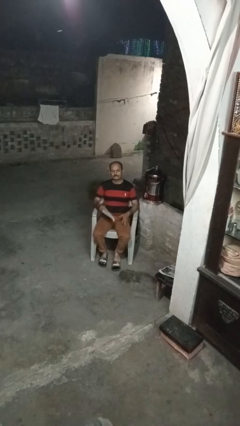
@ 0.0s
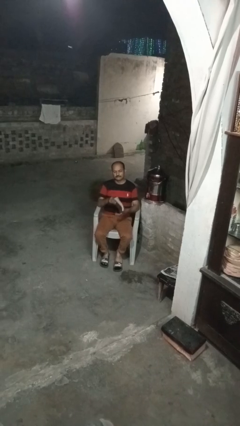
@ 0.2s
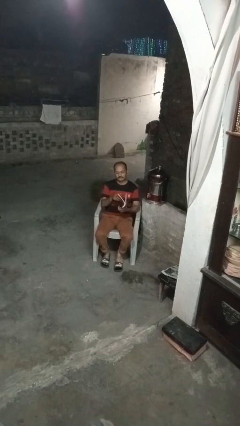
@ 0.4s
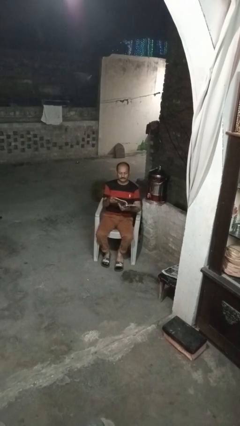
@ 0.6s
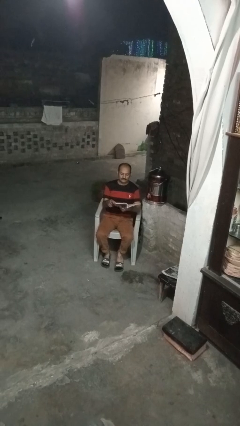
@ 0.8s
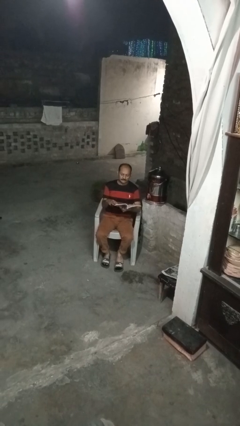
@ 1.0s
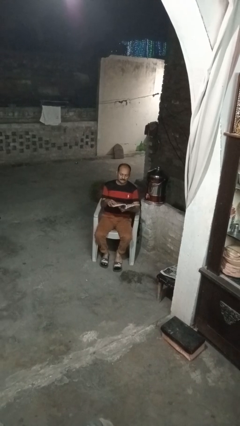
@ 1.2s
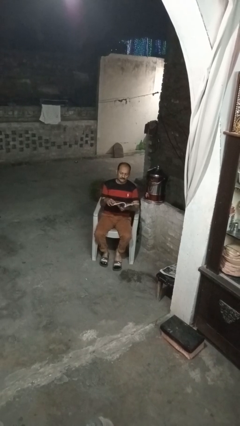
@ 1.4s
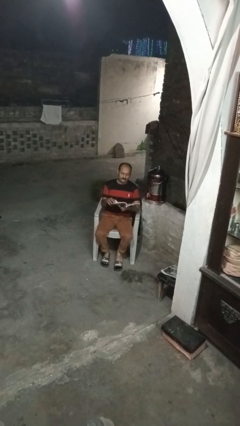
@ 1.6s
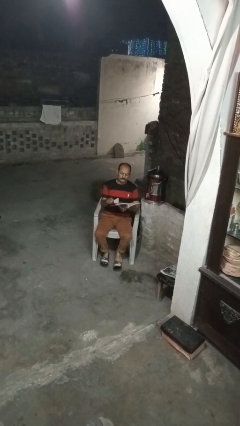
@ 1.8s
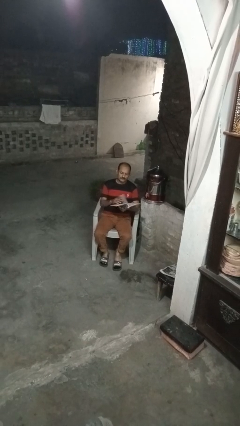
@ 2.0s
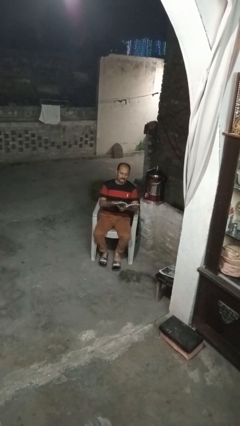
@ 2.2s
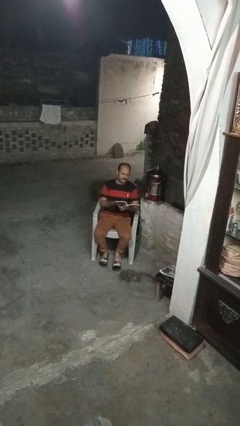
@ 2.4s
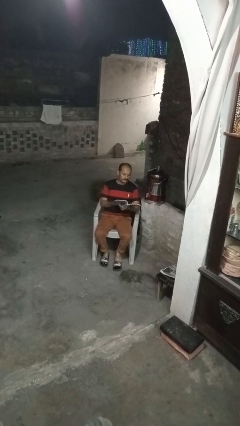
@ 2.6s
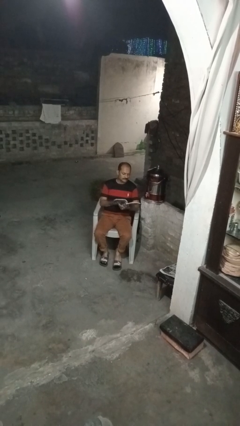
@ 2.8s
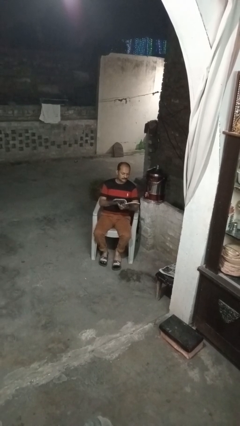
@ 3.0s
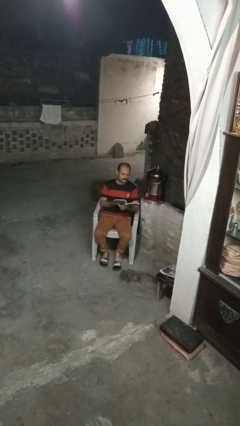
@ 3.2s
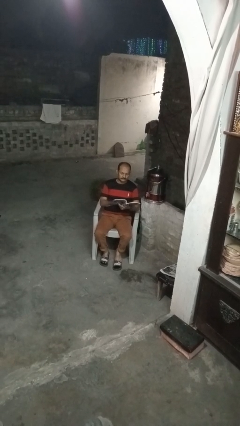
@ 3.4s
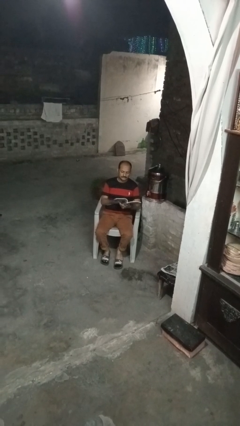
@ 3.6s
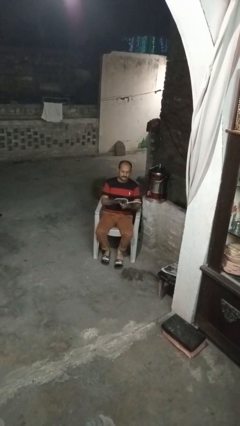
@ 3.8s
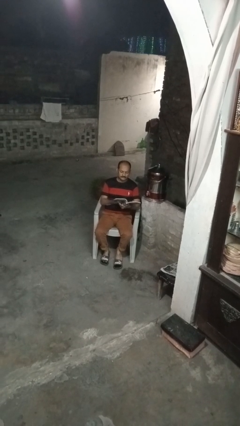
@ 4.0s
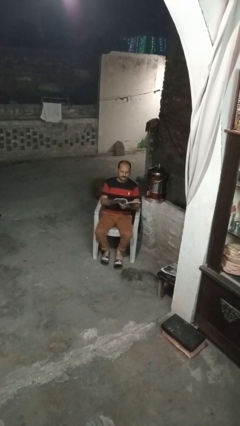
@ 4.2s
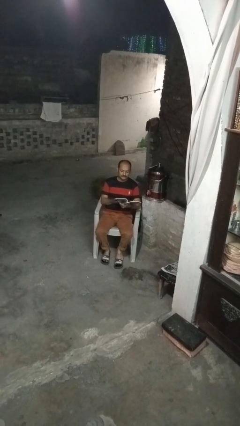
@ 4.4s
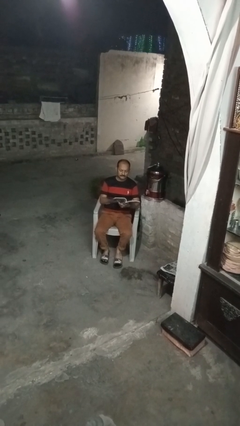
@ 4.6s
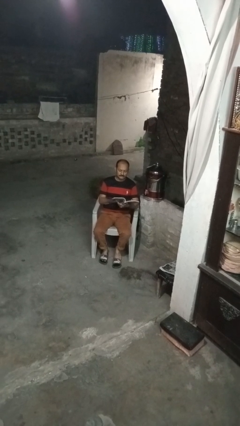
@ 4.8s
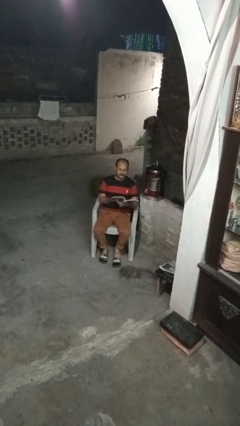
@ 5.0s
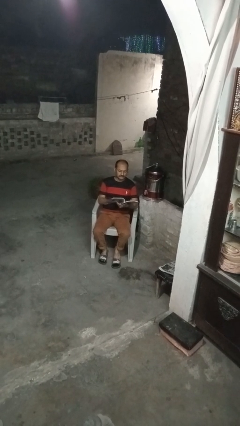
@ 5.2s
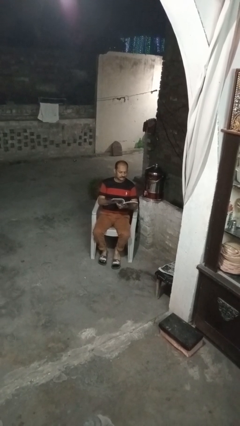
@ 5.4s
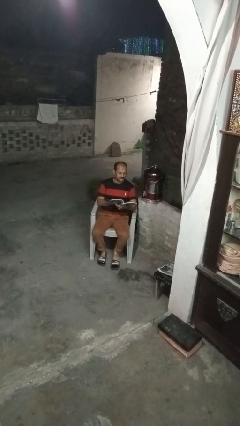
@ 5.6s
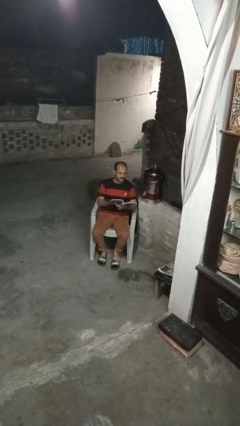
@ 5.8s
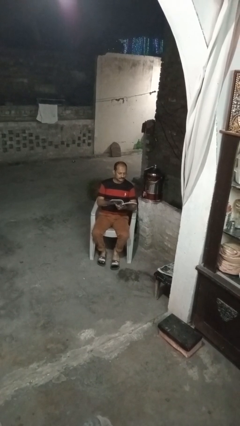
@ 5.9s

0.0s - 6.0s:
person reads book

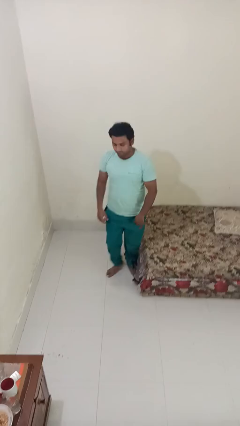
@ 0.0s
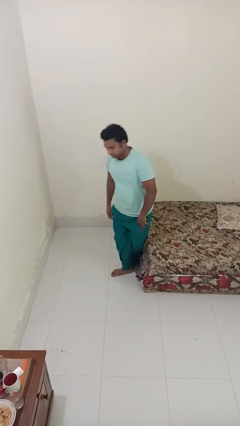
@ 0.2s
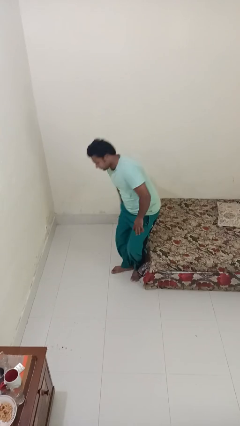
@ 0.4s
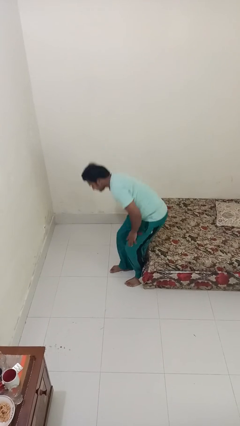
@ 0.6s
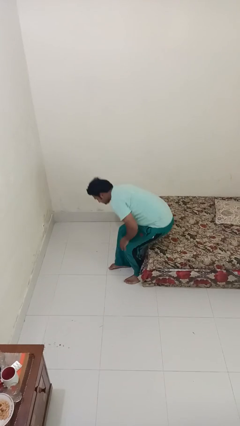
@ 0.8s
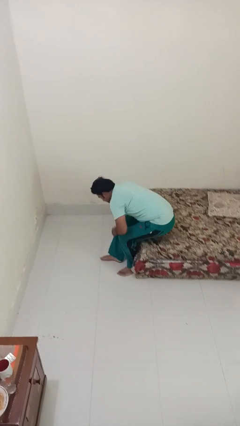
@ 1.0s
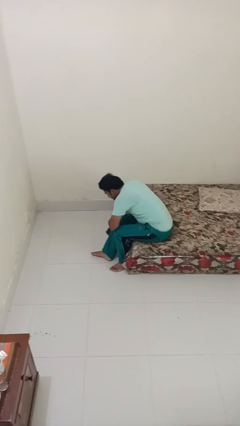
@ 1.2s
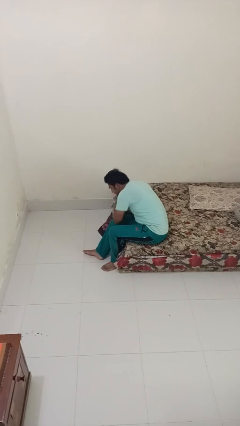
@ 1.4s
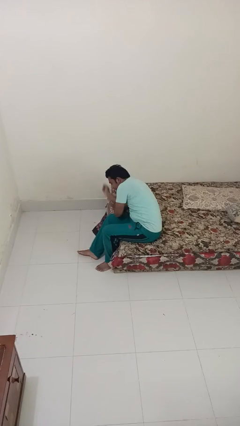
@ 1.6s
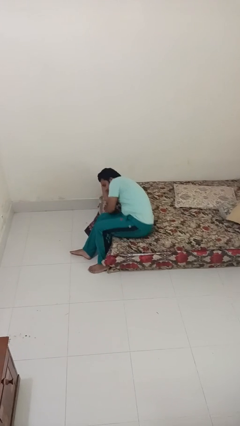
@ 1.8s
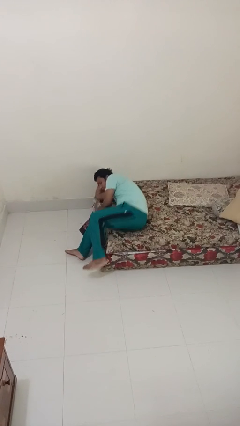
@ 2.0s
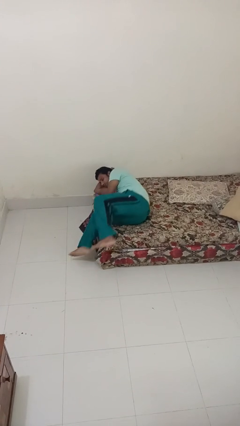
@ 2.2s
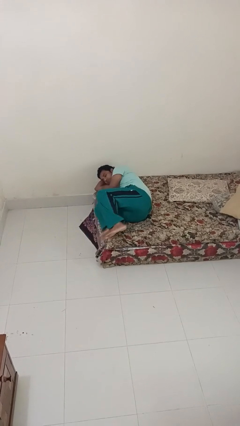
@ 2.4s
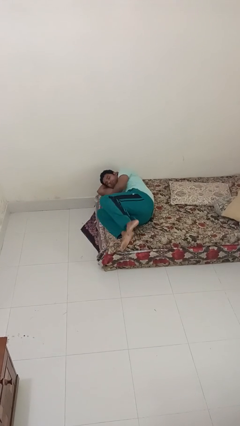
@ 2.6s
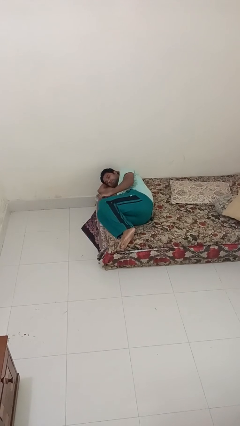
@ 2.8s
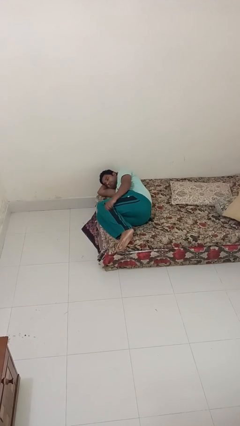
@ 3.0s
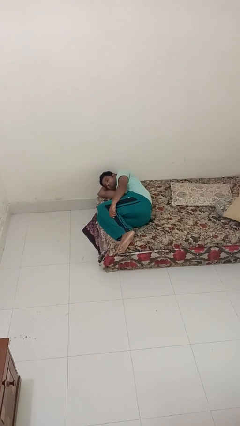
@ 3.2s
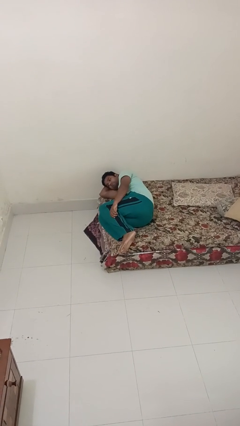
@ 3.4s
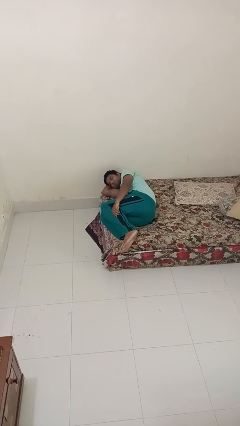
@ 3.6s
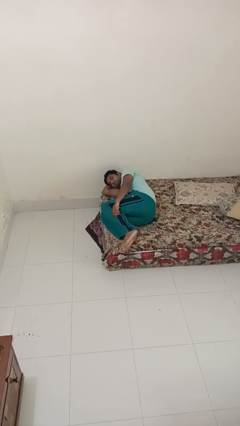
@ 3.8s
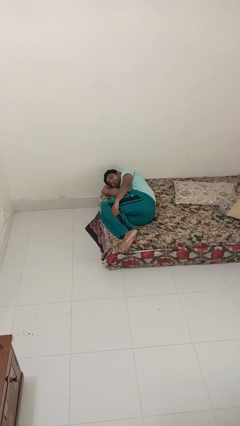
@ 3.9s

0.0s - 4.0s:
person lies down on bed

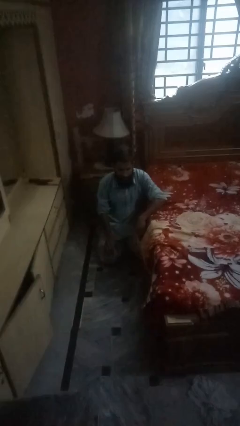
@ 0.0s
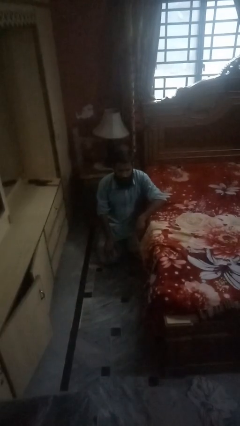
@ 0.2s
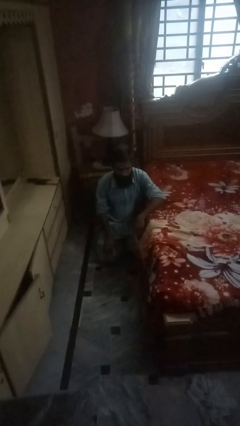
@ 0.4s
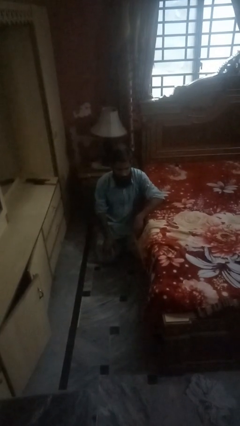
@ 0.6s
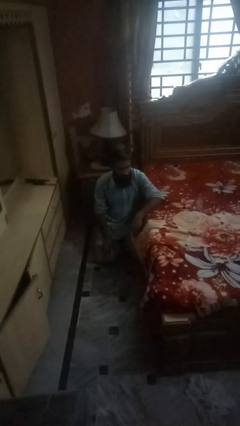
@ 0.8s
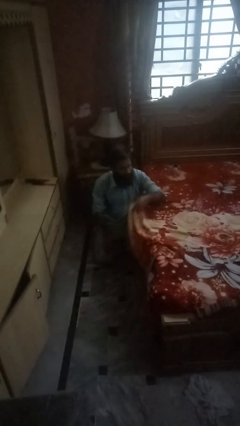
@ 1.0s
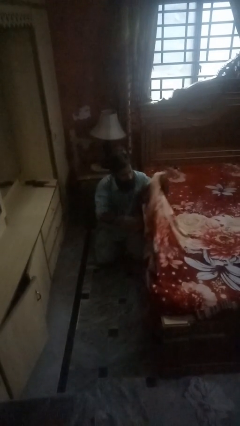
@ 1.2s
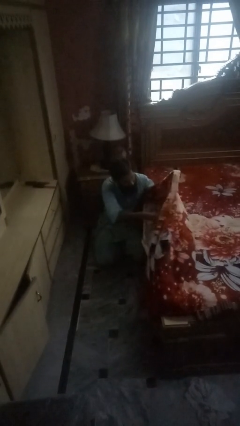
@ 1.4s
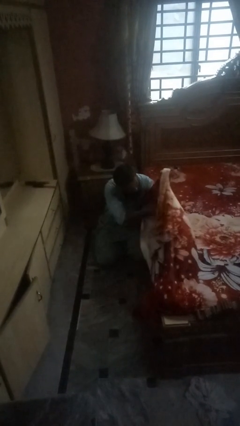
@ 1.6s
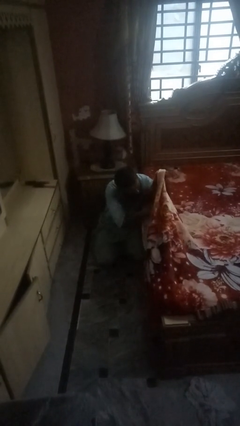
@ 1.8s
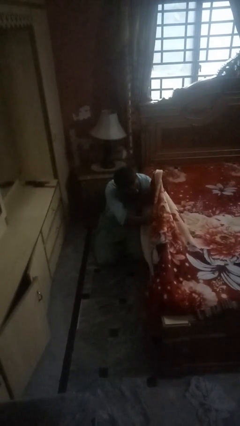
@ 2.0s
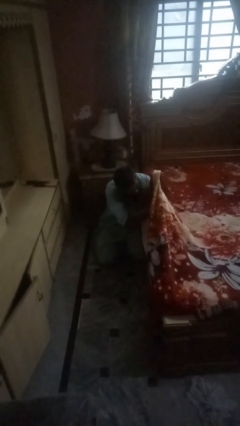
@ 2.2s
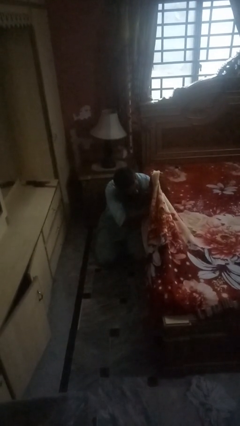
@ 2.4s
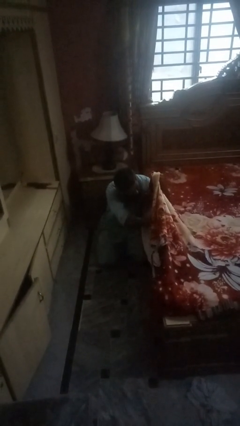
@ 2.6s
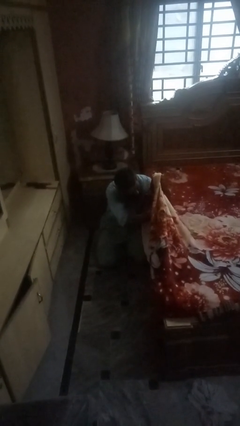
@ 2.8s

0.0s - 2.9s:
person searches under bed

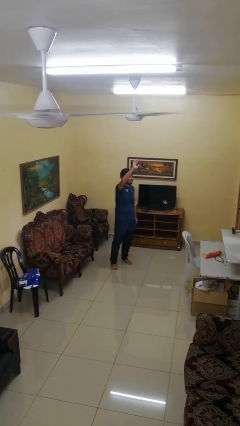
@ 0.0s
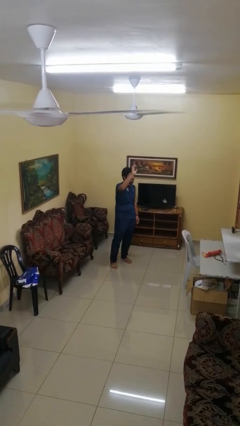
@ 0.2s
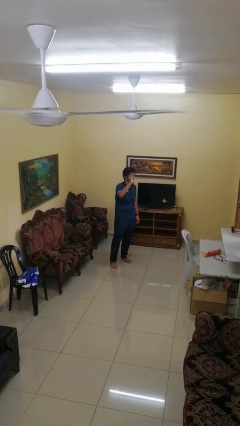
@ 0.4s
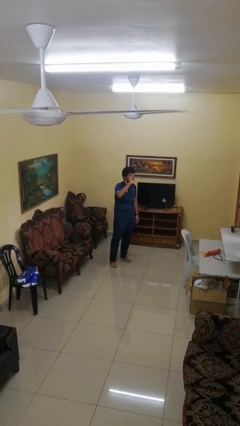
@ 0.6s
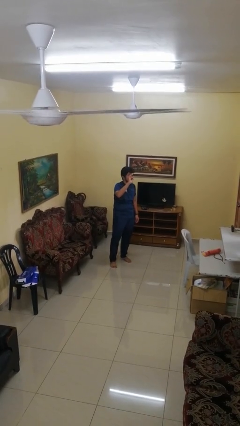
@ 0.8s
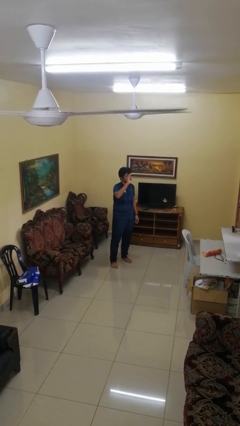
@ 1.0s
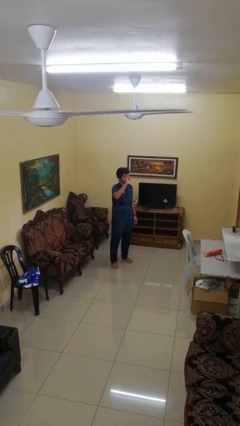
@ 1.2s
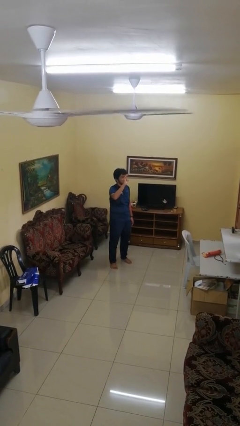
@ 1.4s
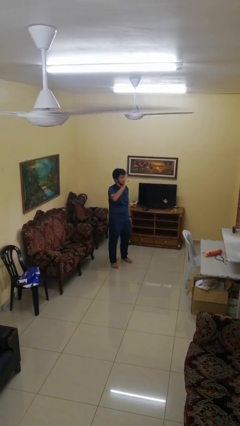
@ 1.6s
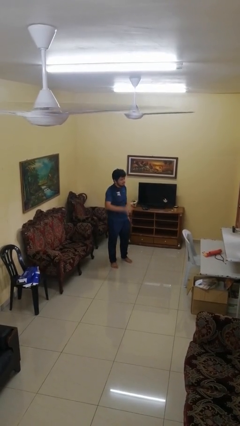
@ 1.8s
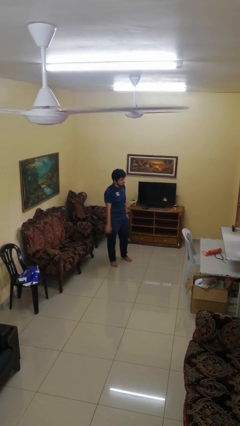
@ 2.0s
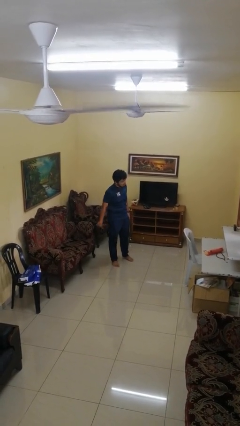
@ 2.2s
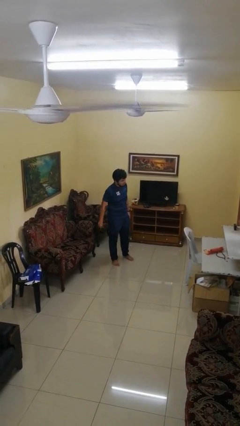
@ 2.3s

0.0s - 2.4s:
person gestures lower hand

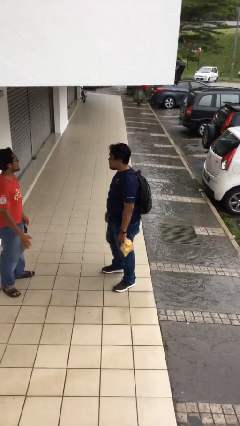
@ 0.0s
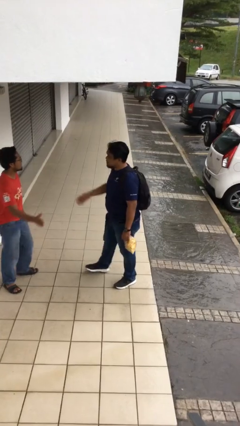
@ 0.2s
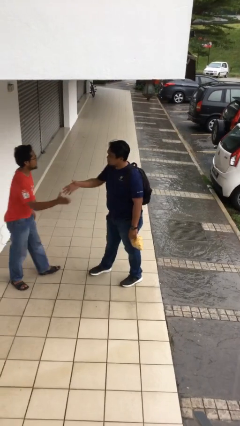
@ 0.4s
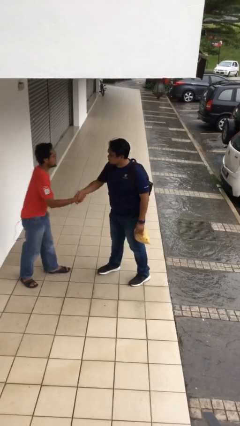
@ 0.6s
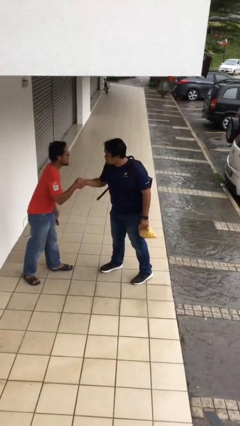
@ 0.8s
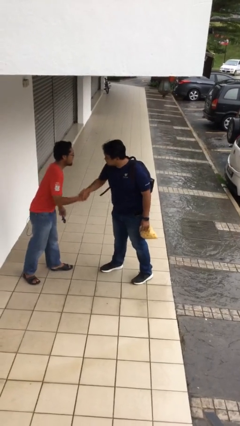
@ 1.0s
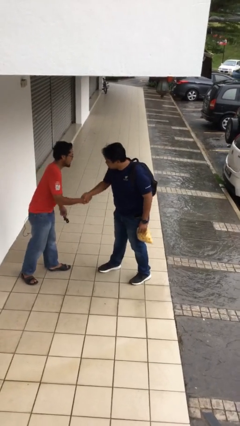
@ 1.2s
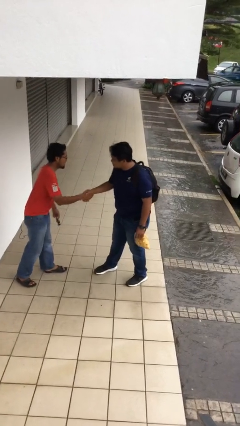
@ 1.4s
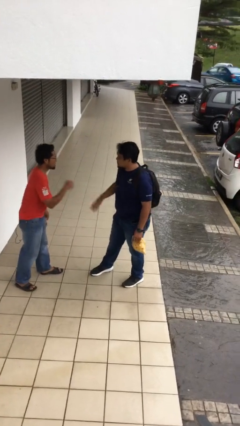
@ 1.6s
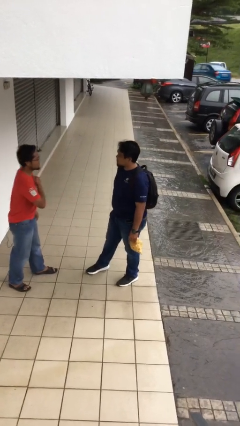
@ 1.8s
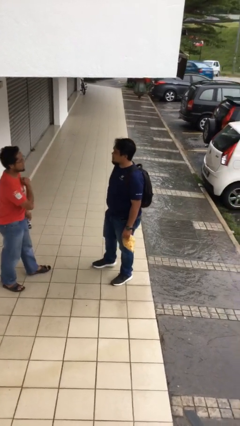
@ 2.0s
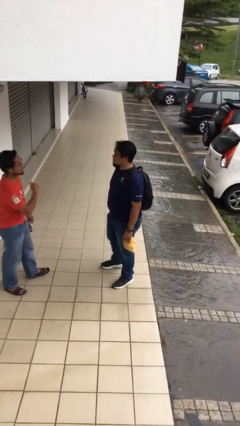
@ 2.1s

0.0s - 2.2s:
person shakes hand
